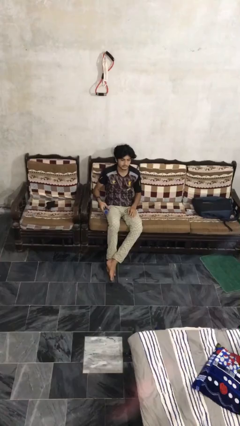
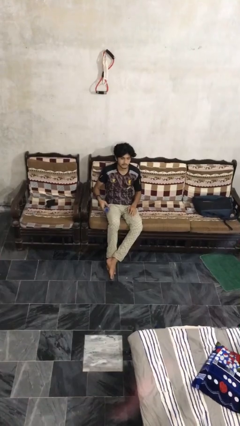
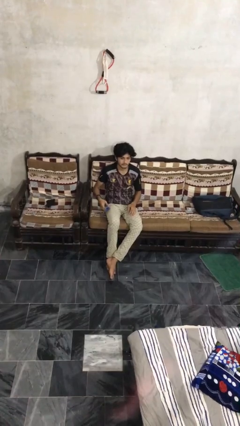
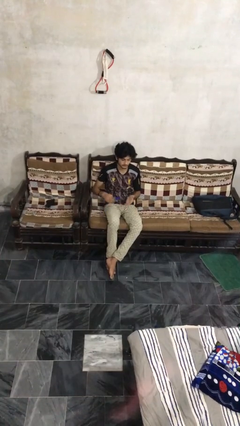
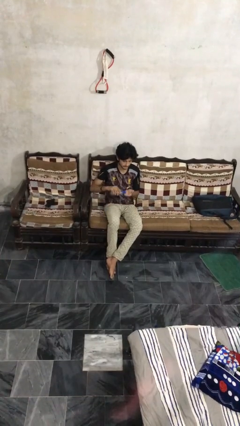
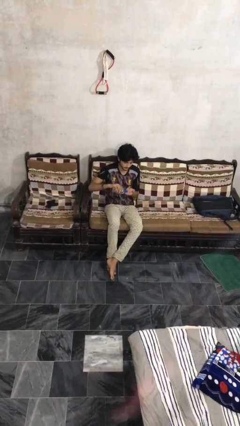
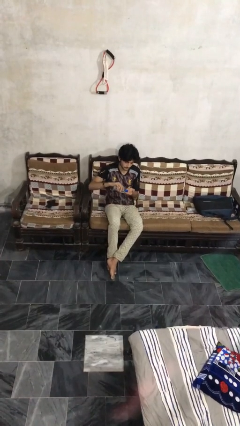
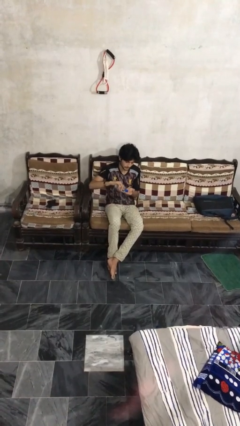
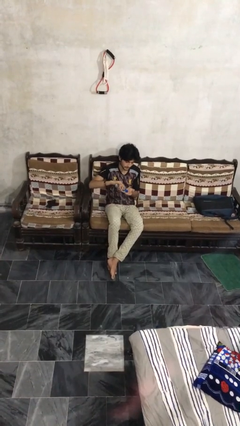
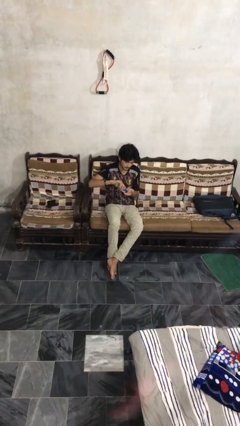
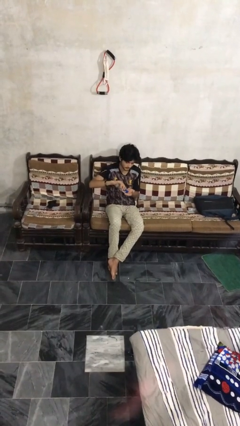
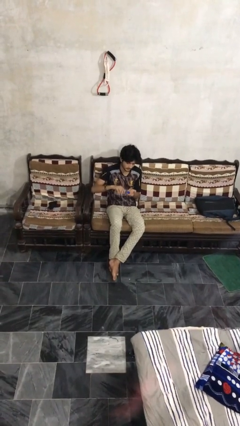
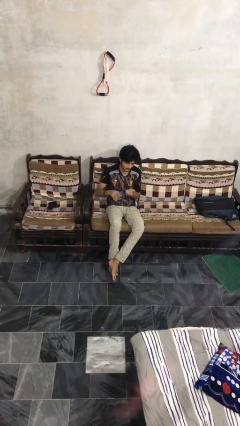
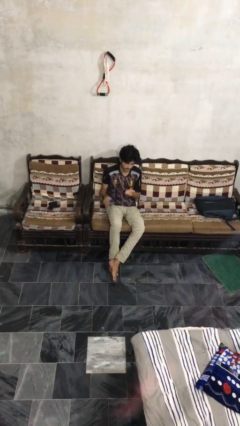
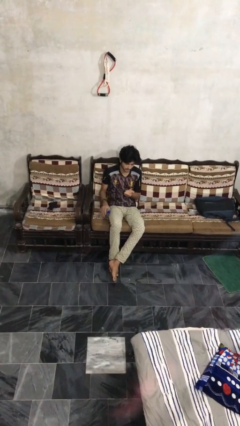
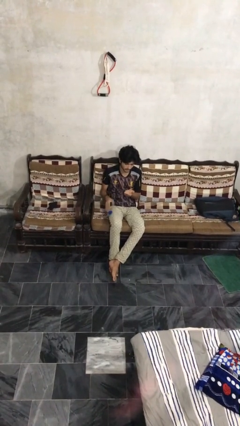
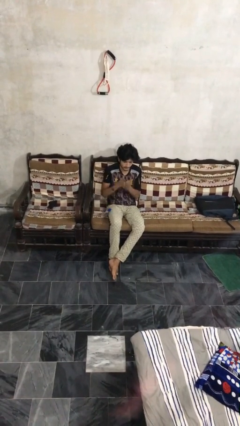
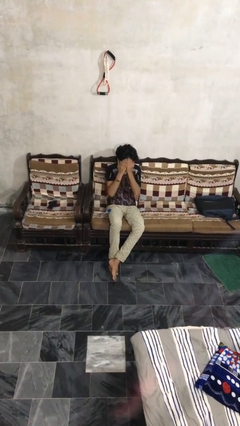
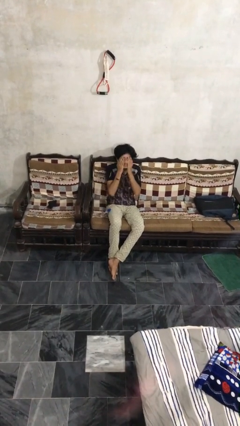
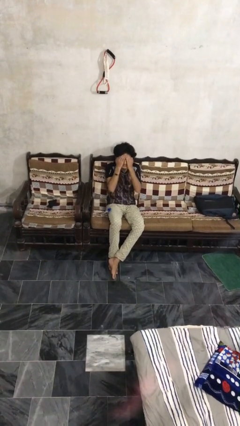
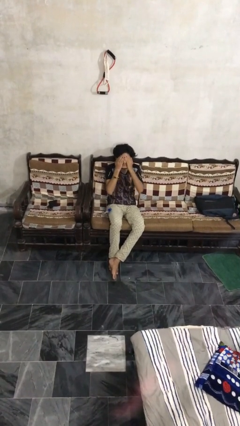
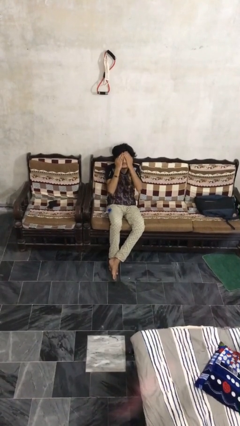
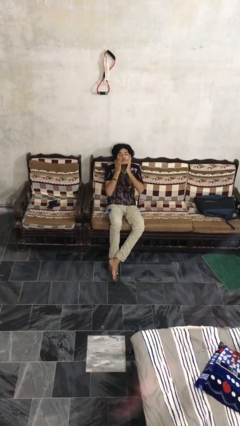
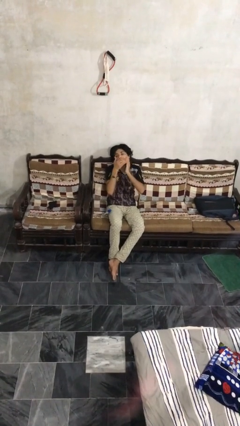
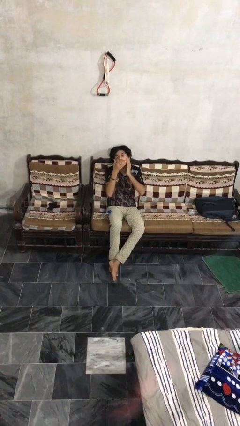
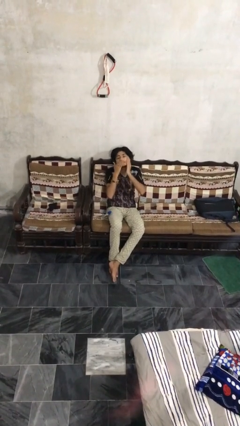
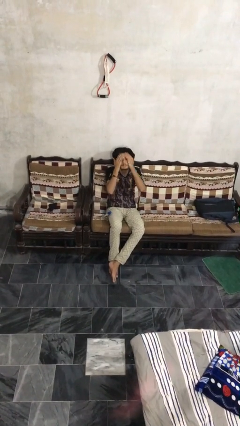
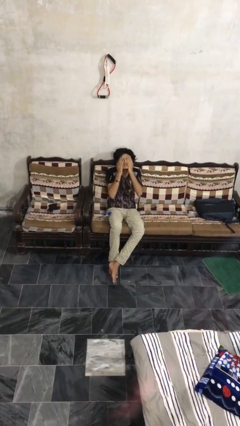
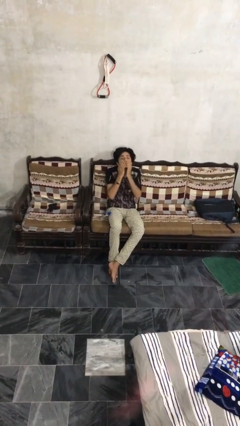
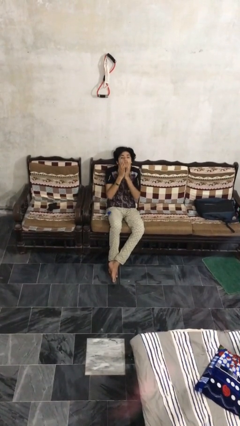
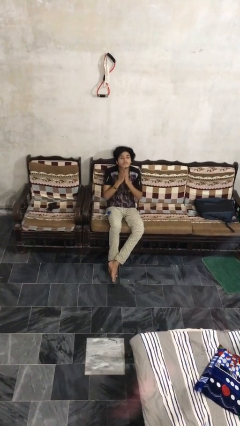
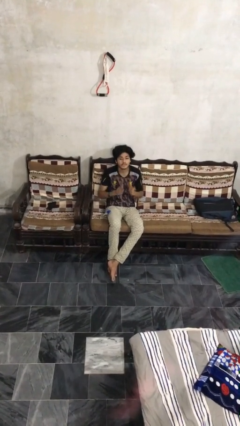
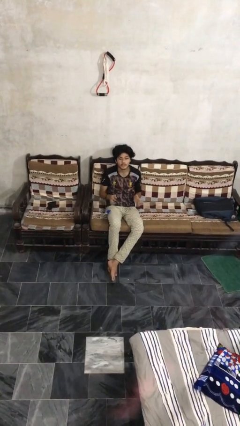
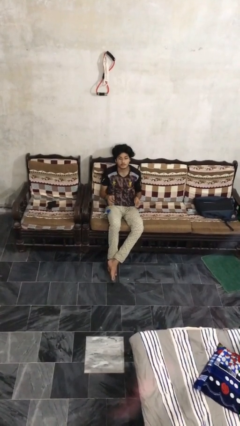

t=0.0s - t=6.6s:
person applies facial moisturizer

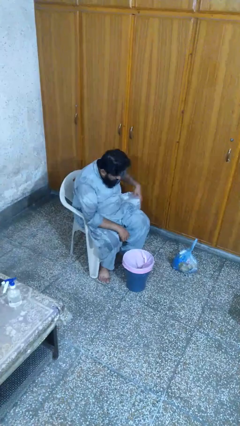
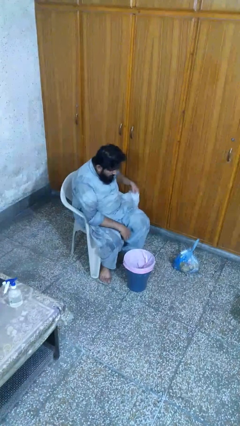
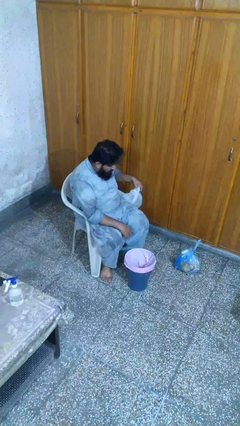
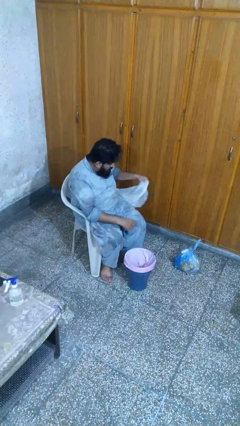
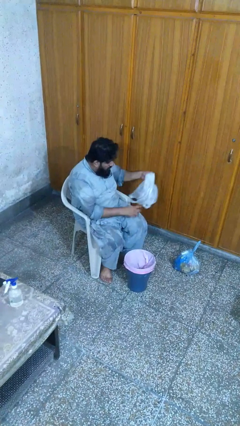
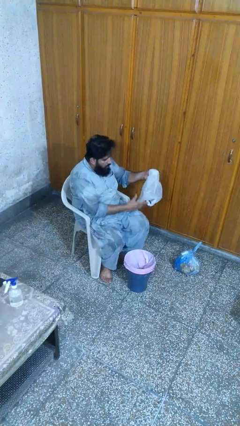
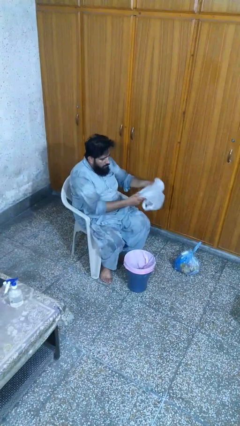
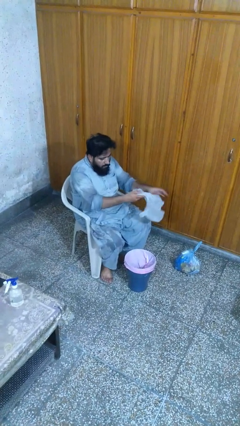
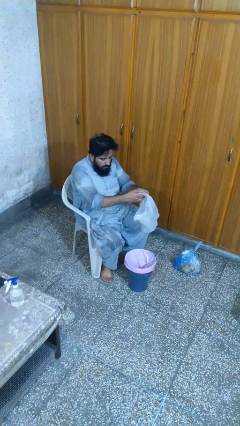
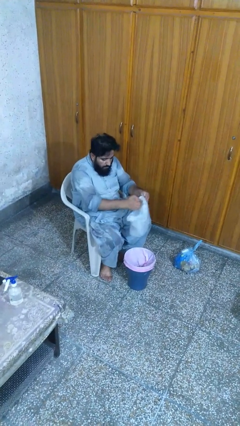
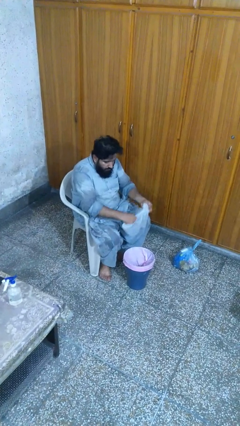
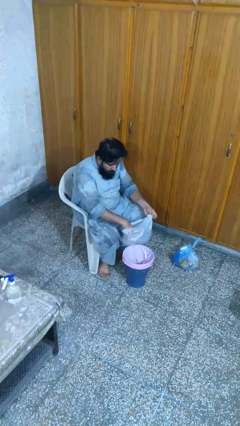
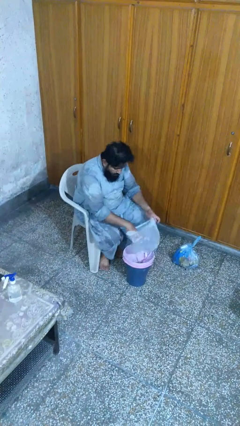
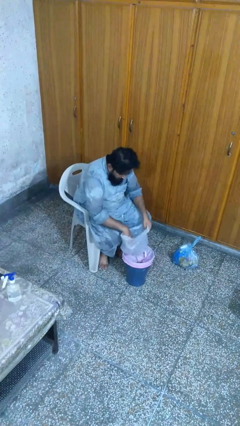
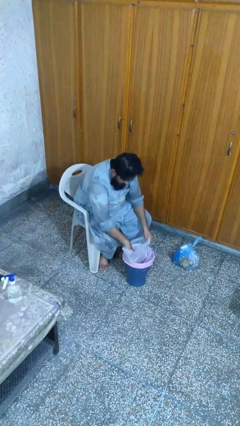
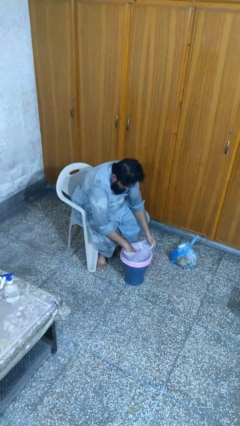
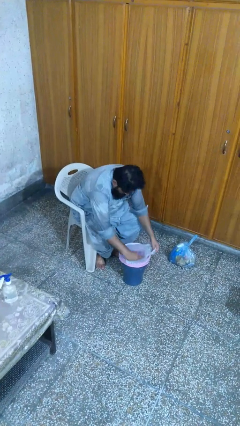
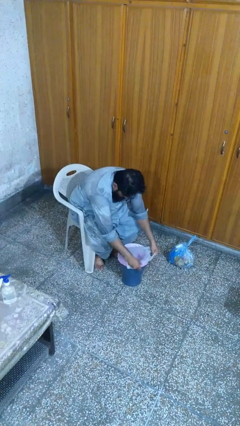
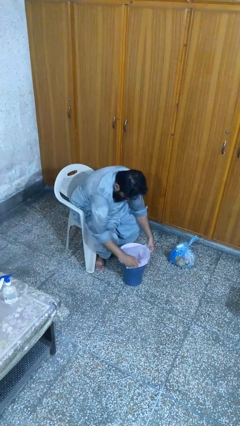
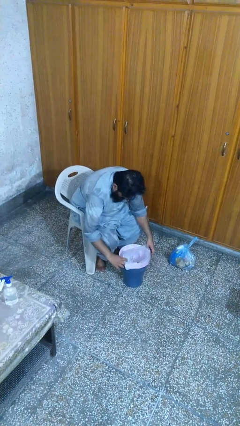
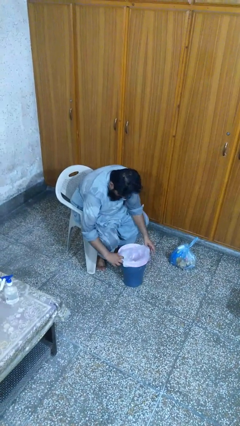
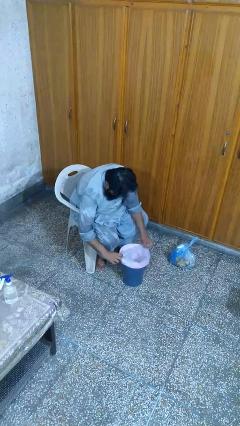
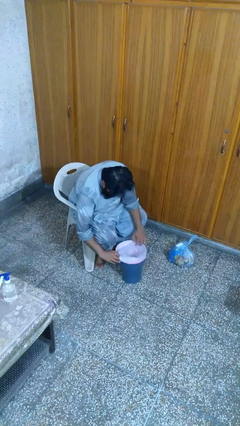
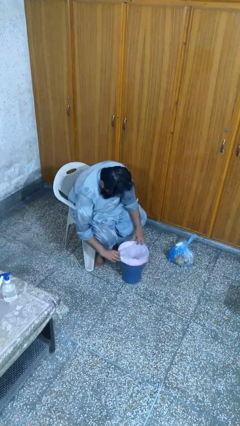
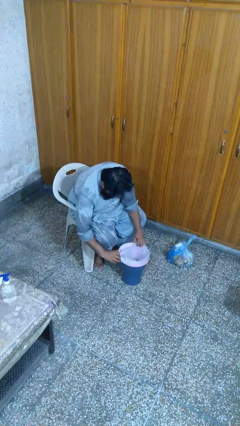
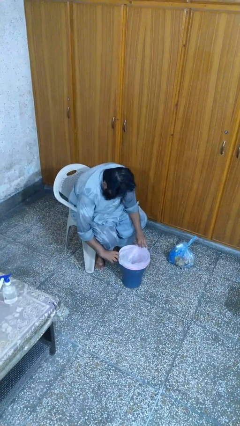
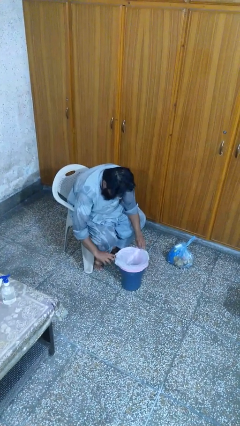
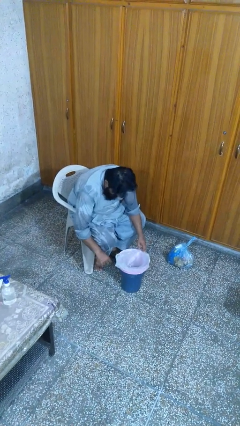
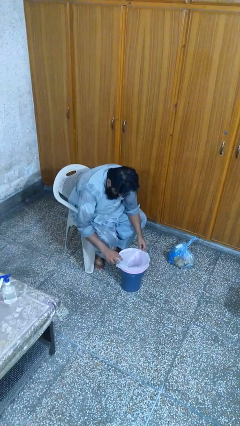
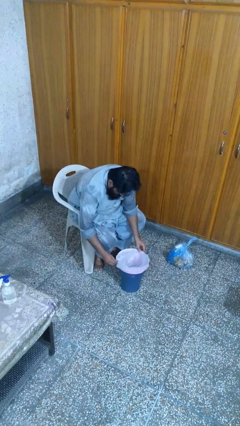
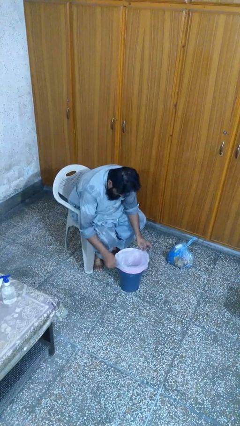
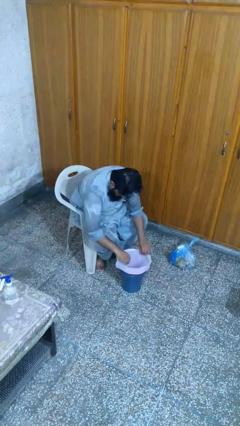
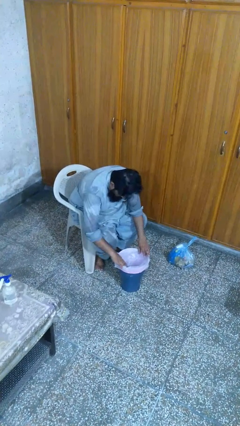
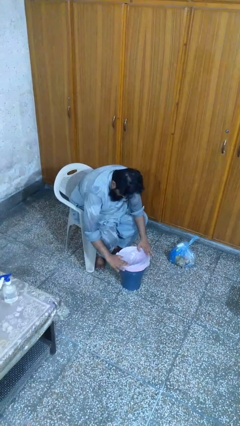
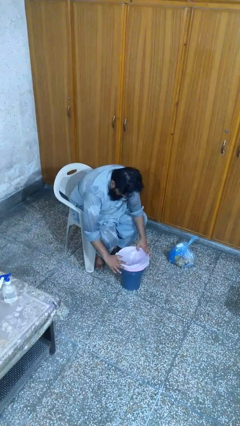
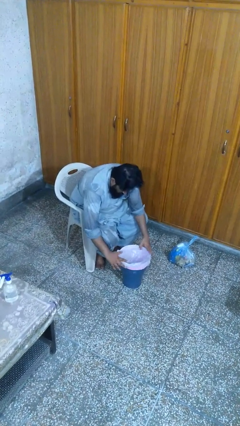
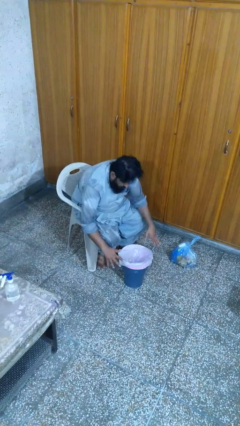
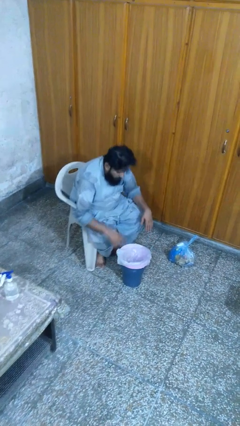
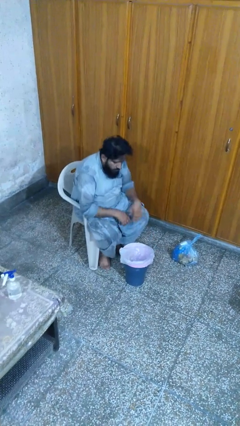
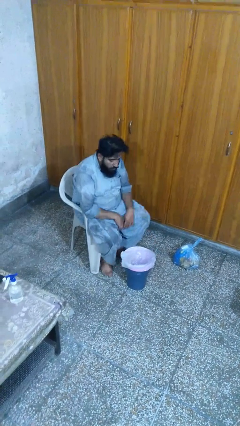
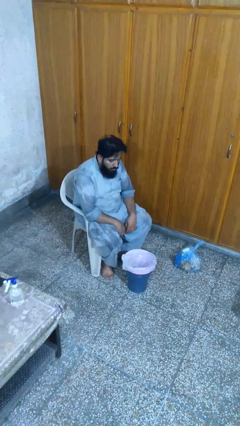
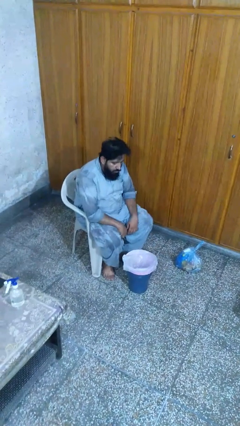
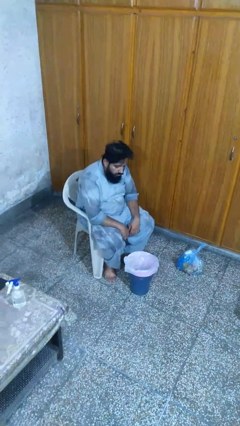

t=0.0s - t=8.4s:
person inserts trashbag into trashcan

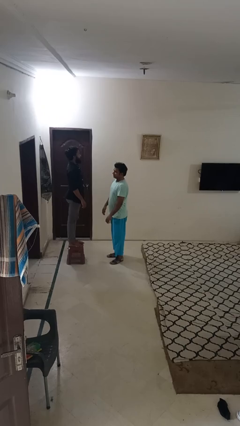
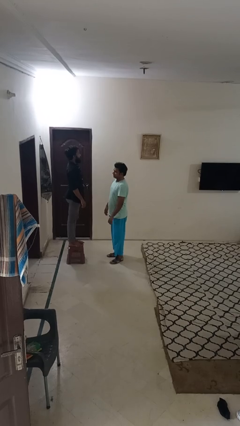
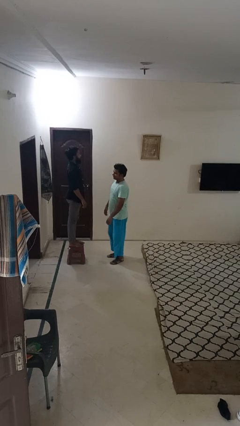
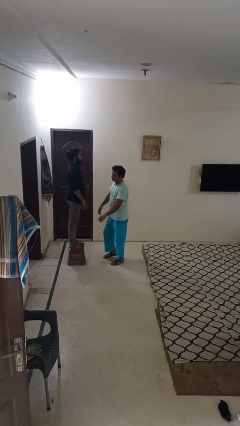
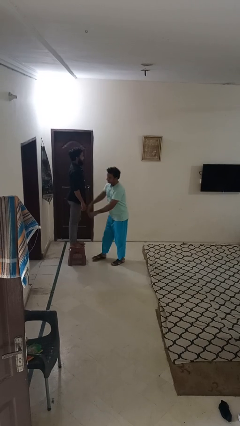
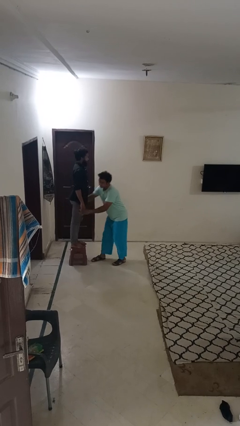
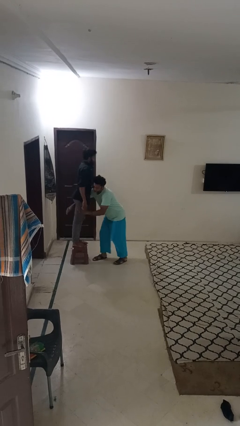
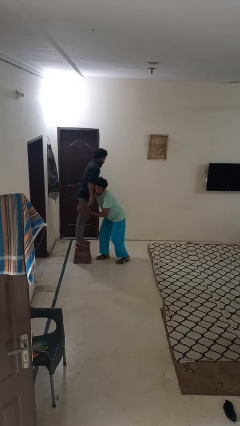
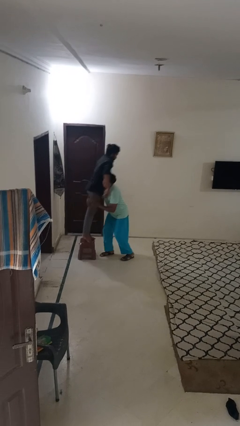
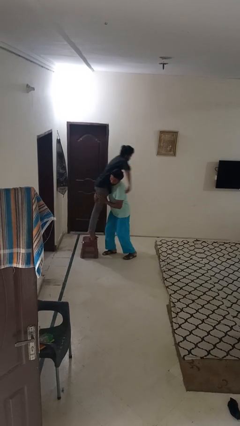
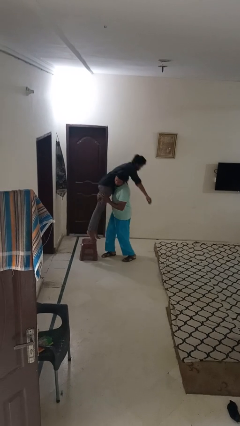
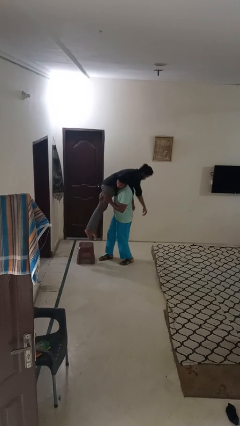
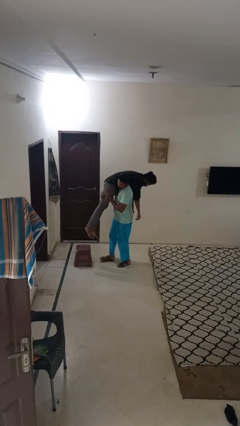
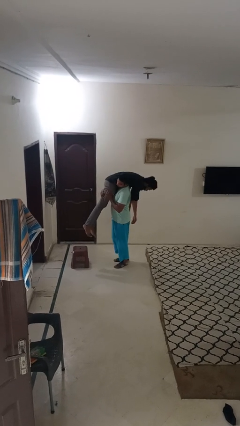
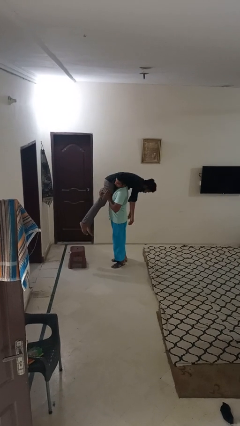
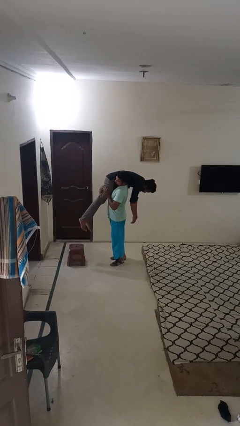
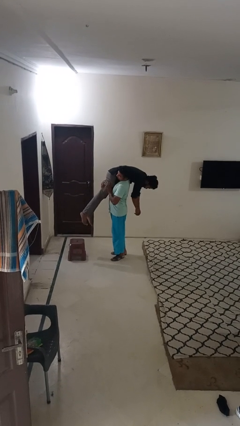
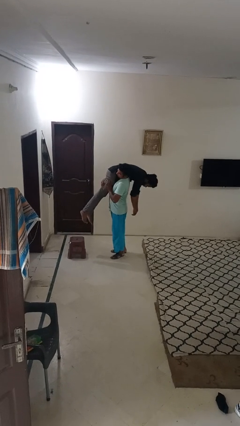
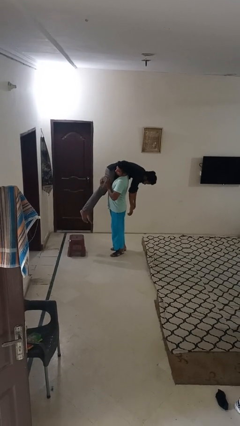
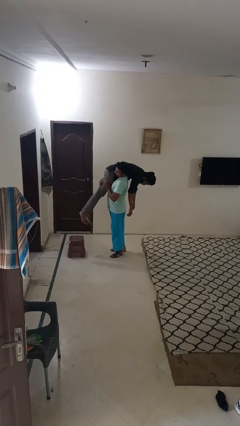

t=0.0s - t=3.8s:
person carries person over shoulder
